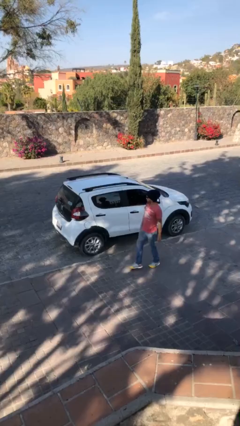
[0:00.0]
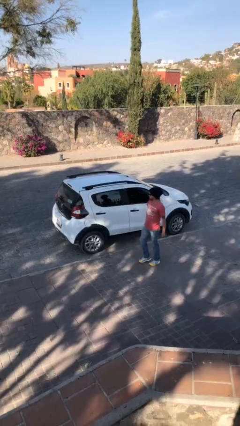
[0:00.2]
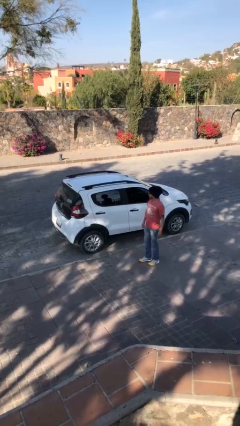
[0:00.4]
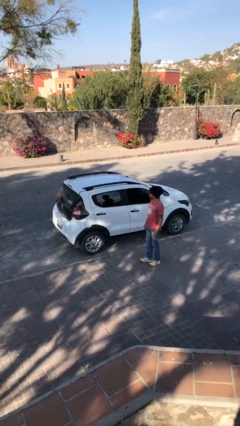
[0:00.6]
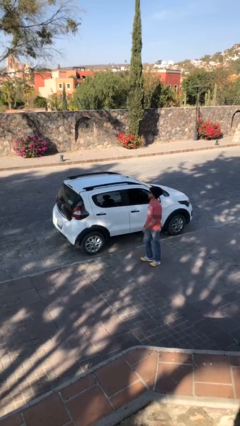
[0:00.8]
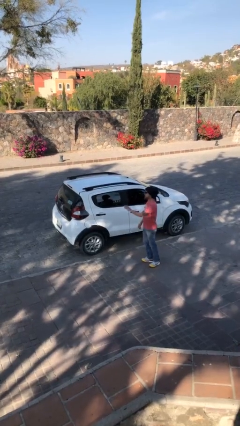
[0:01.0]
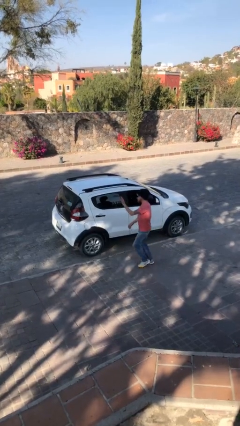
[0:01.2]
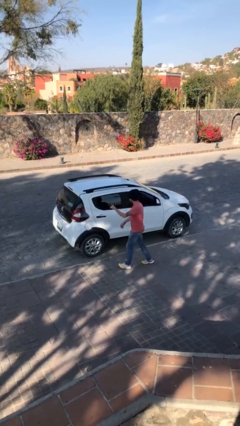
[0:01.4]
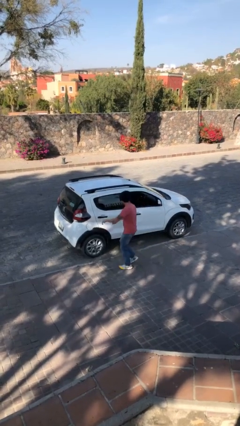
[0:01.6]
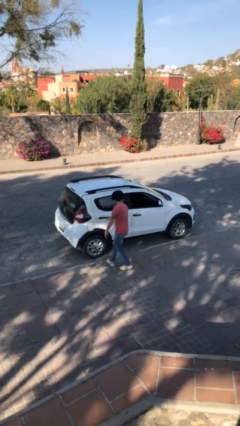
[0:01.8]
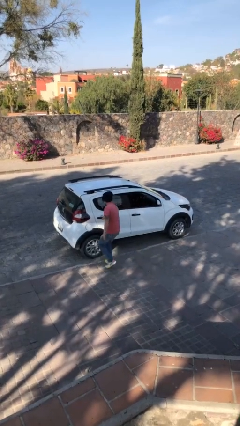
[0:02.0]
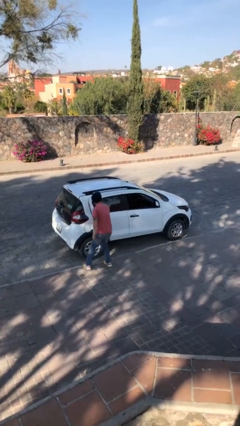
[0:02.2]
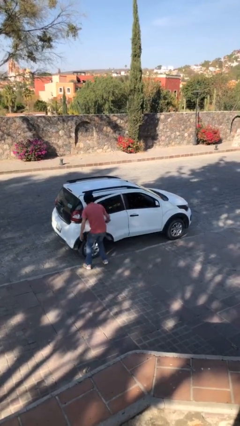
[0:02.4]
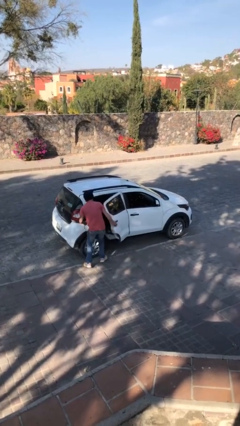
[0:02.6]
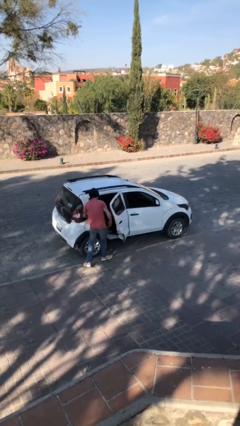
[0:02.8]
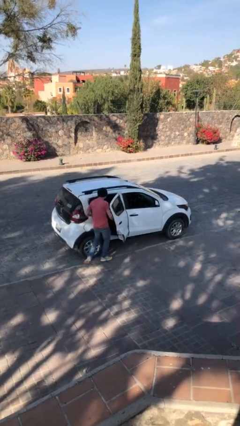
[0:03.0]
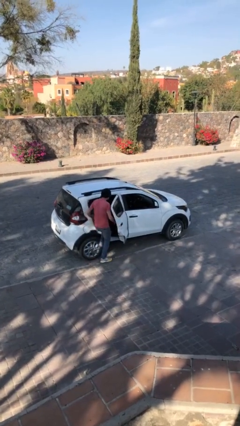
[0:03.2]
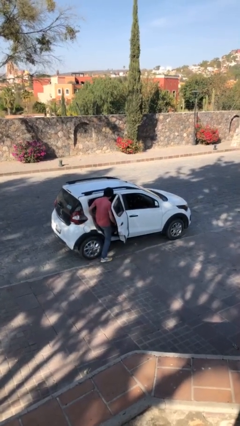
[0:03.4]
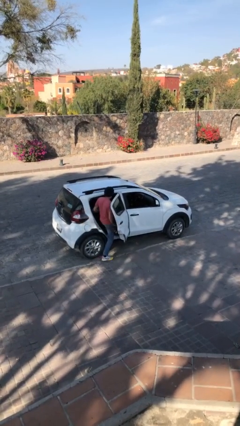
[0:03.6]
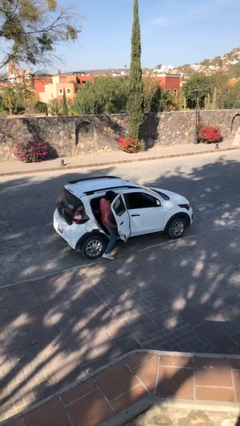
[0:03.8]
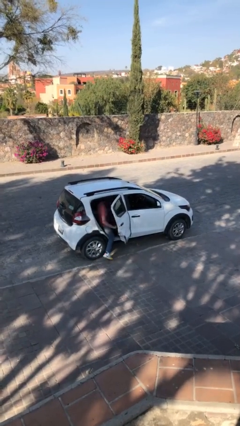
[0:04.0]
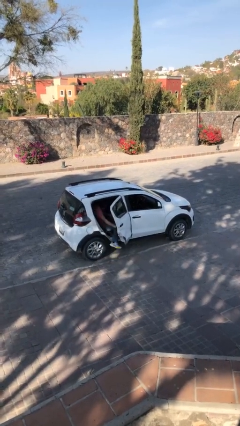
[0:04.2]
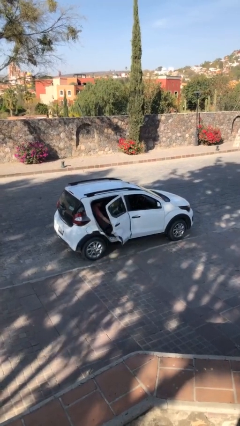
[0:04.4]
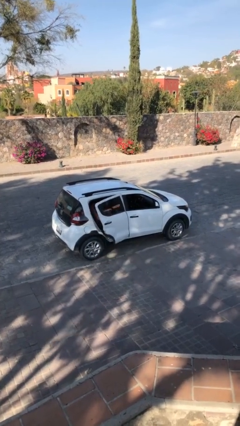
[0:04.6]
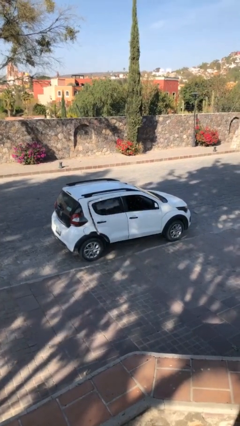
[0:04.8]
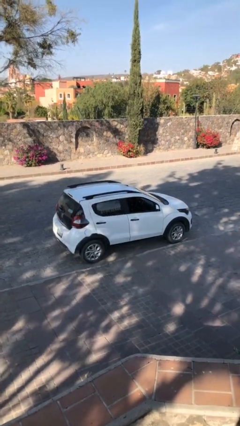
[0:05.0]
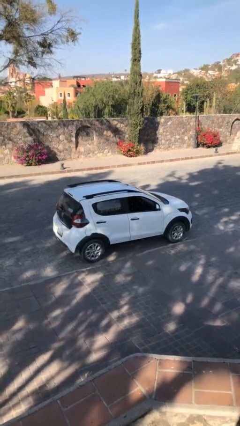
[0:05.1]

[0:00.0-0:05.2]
car picks up person

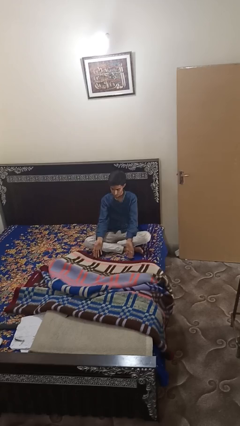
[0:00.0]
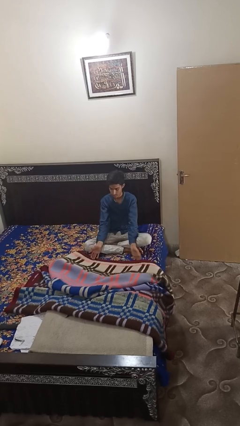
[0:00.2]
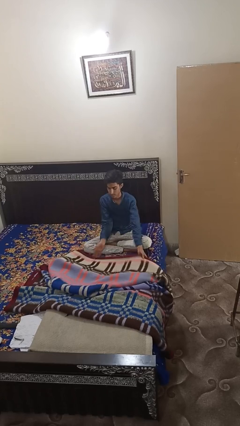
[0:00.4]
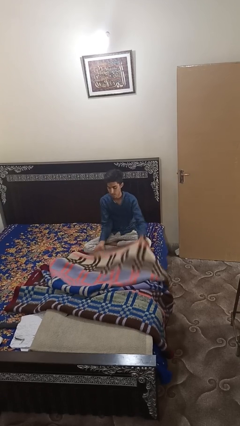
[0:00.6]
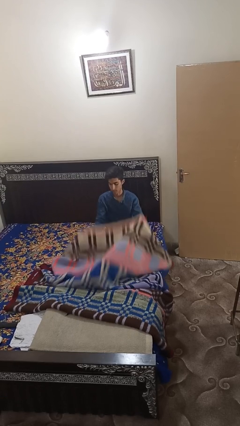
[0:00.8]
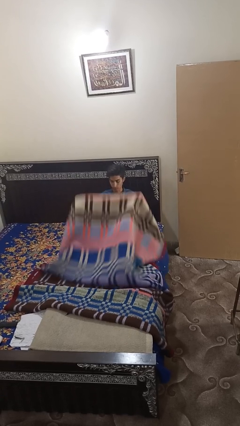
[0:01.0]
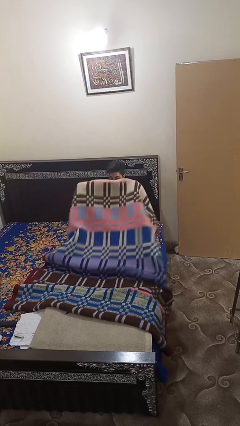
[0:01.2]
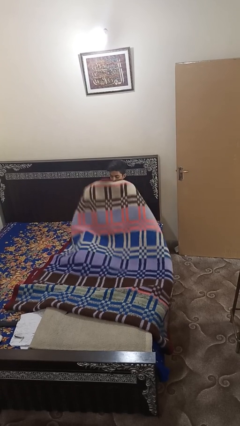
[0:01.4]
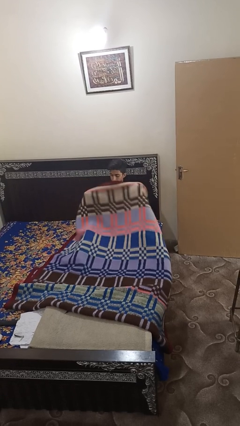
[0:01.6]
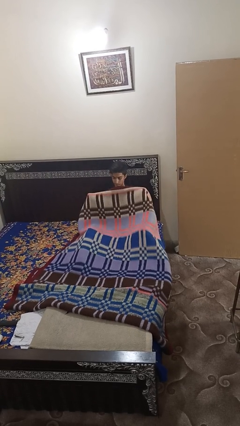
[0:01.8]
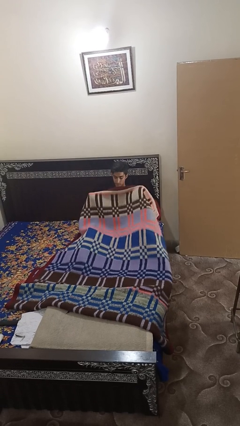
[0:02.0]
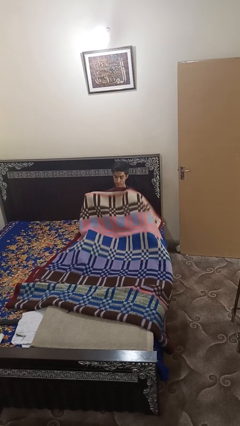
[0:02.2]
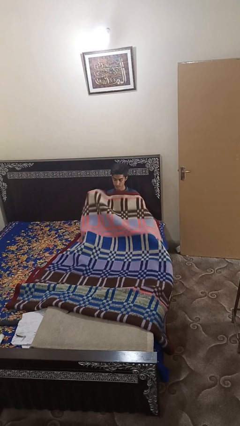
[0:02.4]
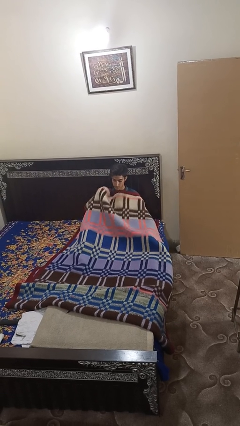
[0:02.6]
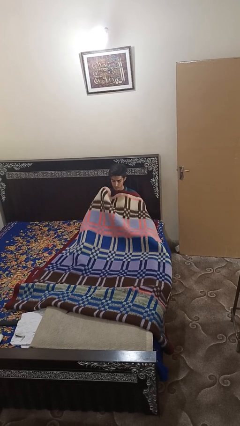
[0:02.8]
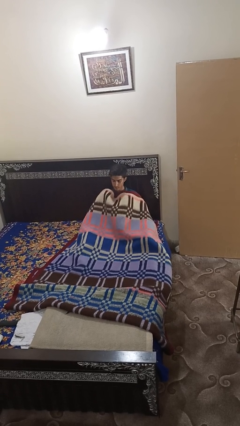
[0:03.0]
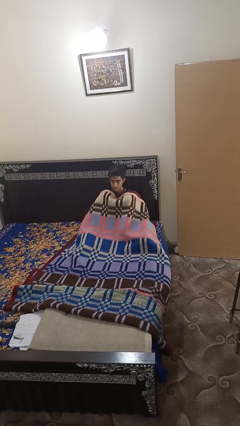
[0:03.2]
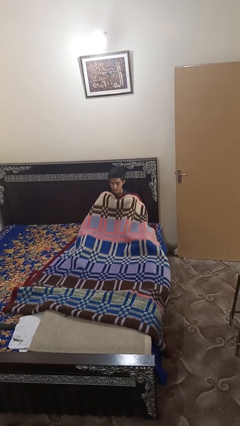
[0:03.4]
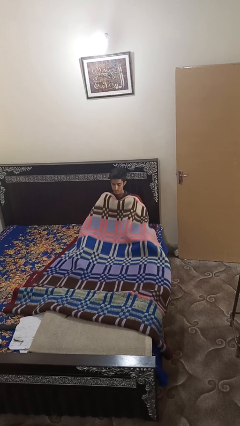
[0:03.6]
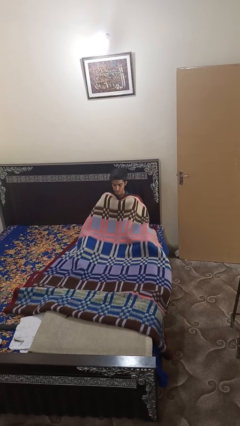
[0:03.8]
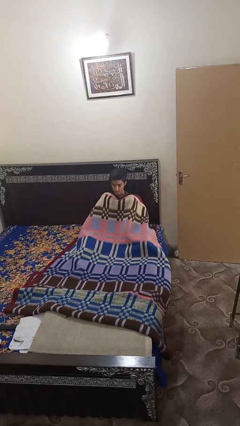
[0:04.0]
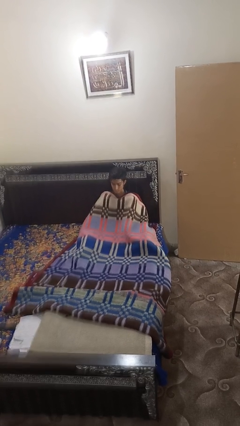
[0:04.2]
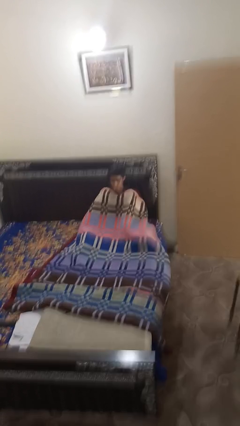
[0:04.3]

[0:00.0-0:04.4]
person covers with blanket

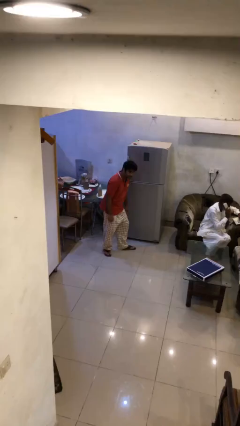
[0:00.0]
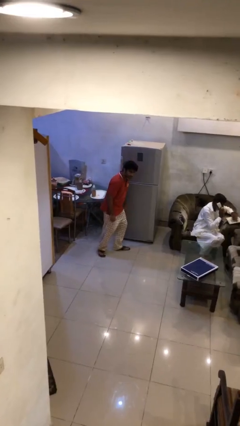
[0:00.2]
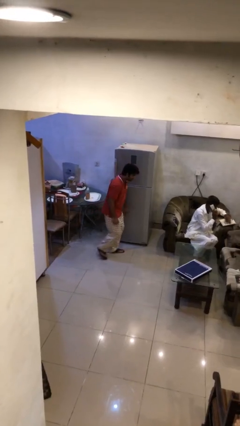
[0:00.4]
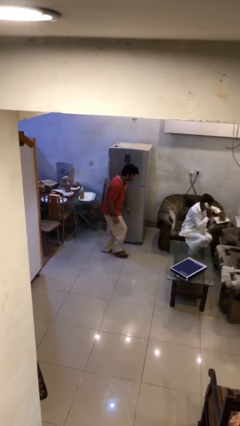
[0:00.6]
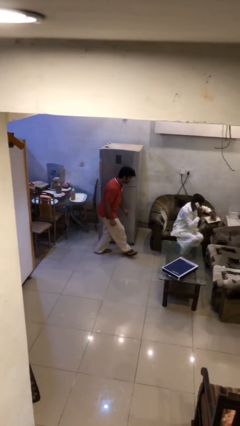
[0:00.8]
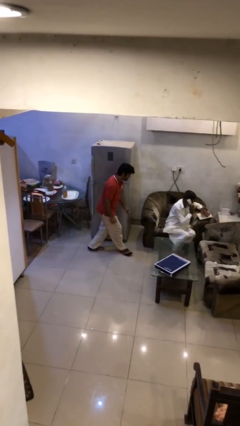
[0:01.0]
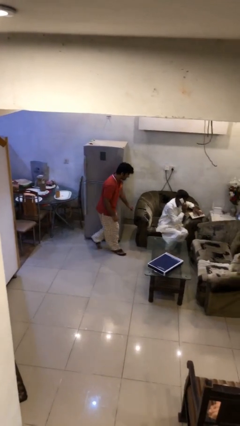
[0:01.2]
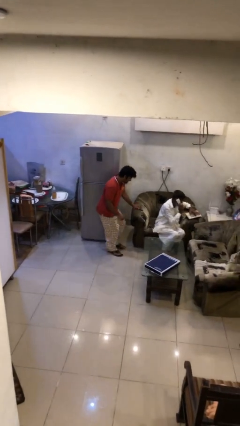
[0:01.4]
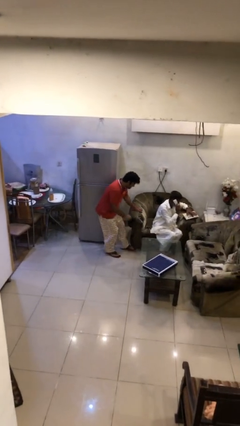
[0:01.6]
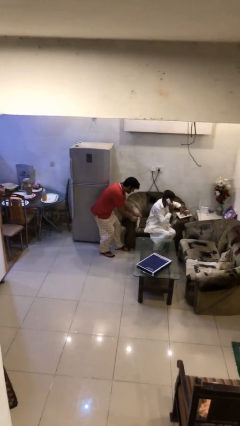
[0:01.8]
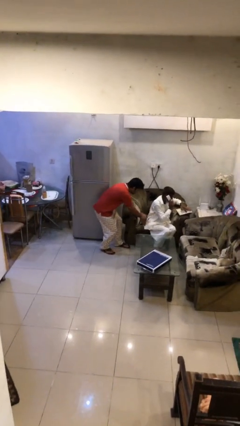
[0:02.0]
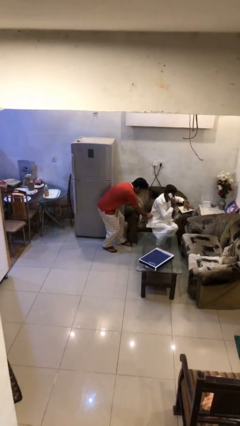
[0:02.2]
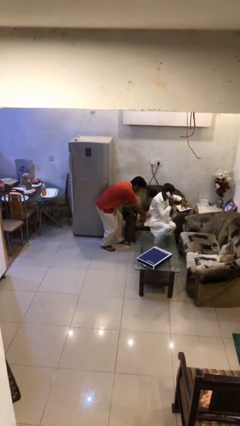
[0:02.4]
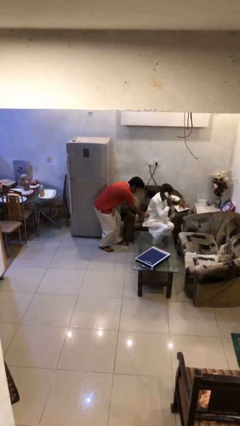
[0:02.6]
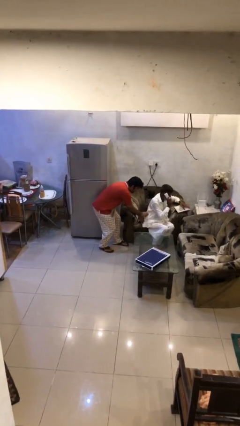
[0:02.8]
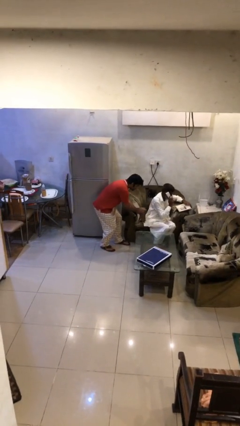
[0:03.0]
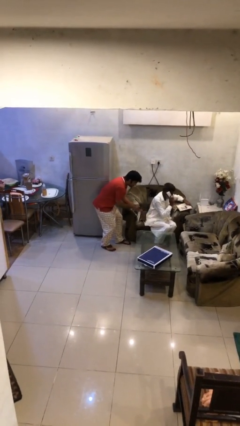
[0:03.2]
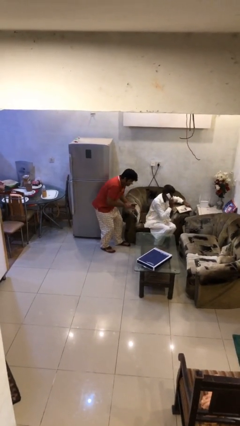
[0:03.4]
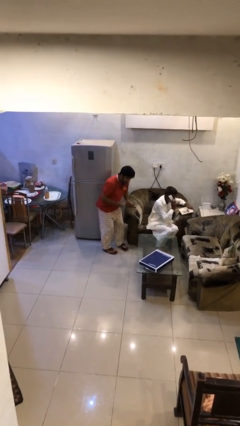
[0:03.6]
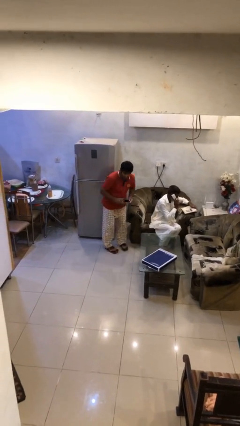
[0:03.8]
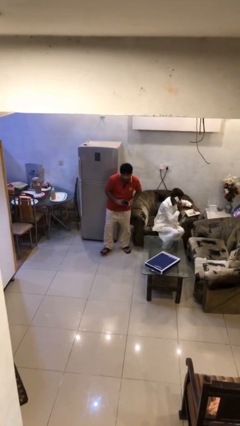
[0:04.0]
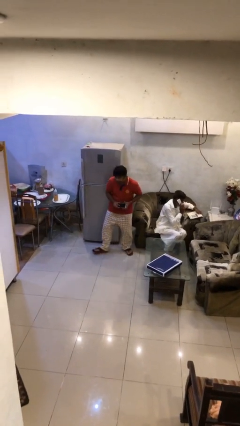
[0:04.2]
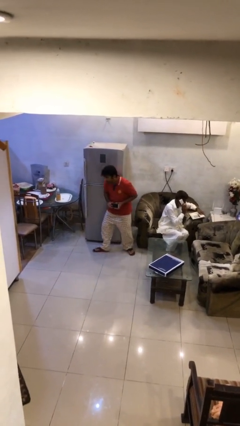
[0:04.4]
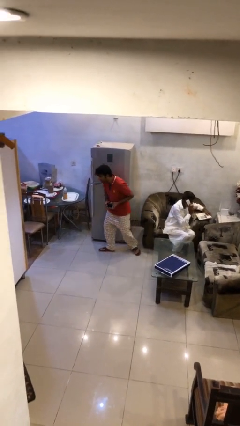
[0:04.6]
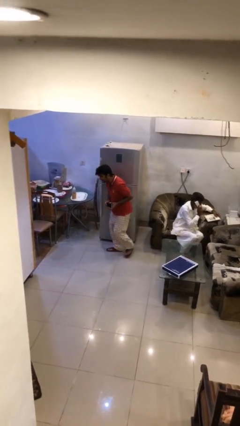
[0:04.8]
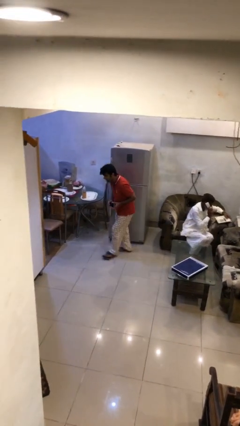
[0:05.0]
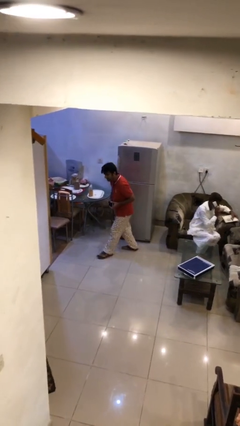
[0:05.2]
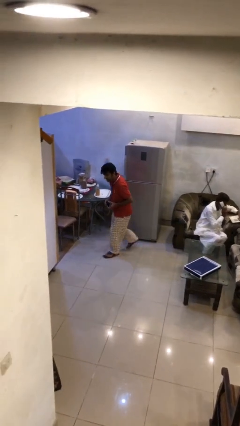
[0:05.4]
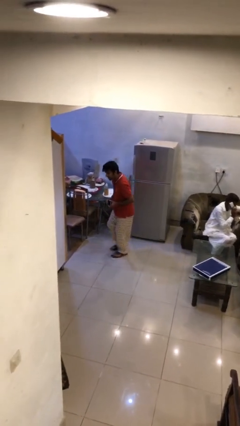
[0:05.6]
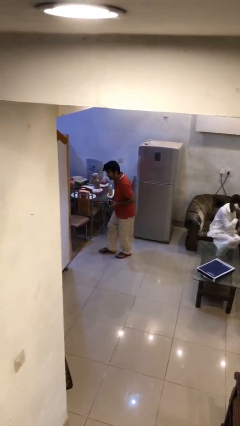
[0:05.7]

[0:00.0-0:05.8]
person steals object from person

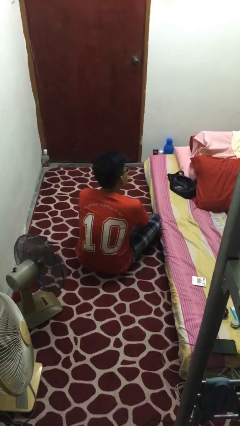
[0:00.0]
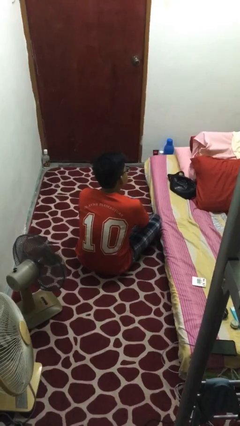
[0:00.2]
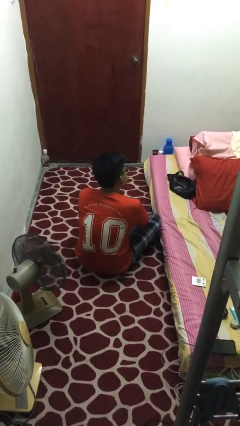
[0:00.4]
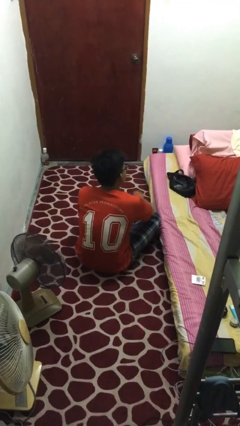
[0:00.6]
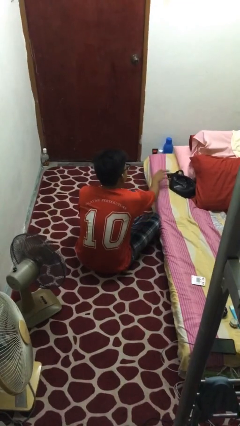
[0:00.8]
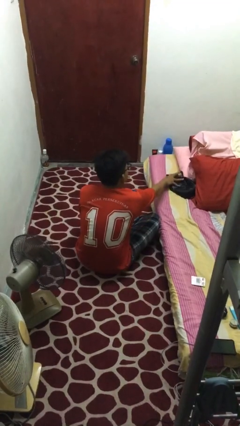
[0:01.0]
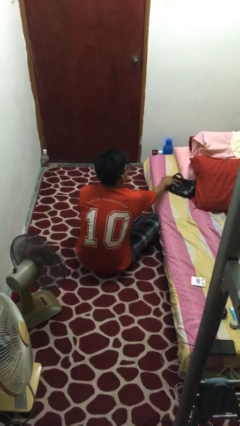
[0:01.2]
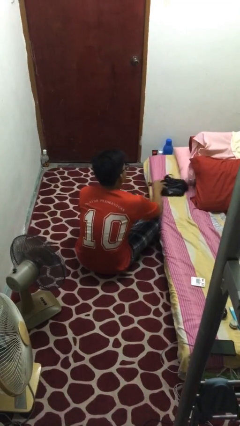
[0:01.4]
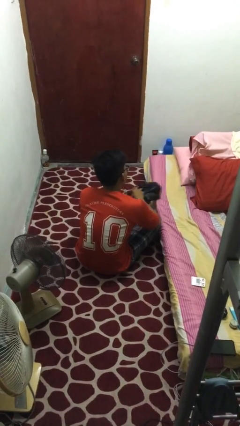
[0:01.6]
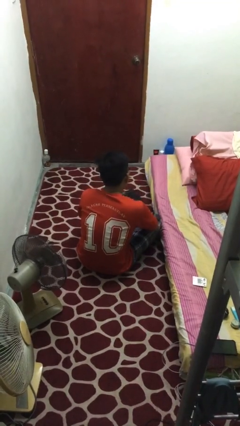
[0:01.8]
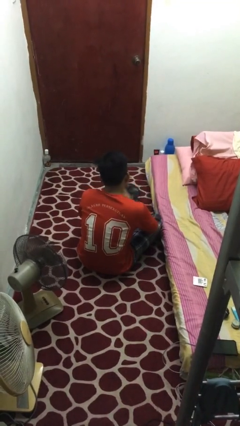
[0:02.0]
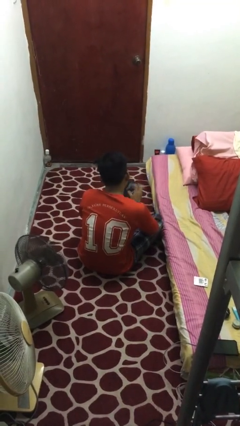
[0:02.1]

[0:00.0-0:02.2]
person picks up object from bed
